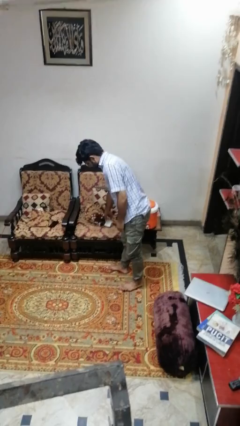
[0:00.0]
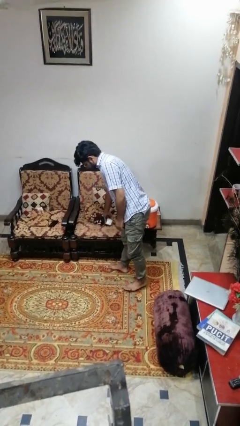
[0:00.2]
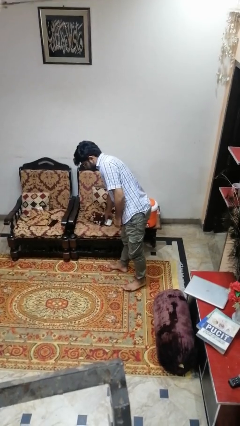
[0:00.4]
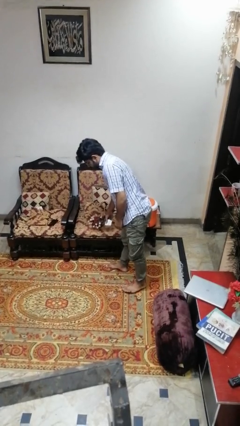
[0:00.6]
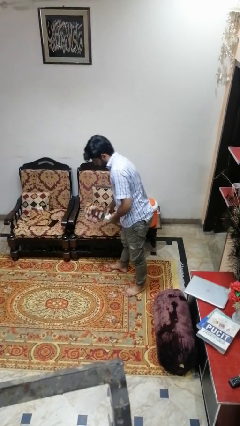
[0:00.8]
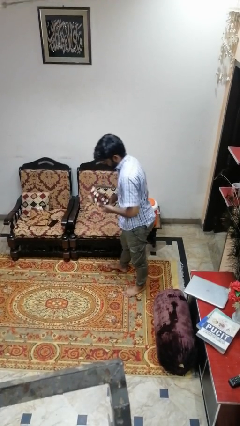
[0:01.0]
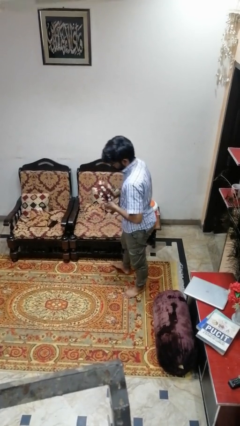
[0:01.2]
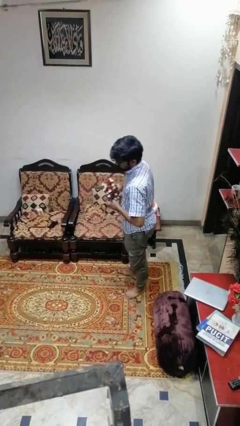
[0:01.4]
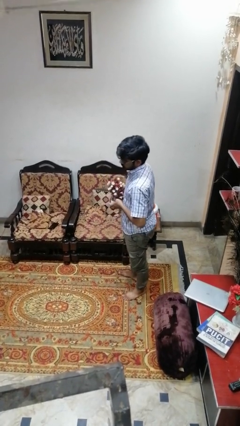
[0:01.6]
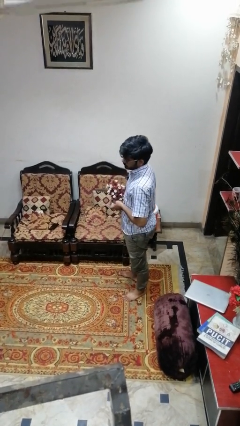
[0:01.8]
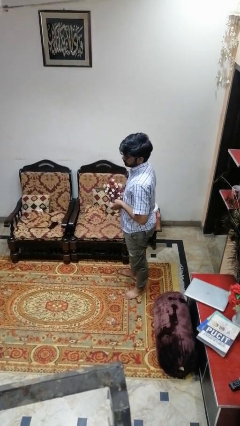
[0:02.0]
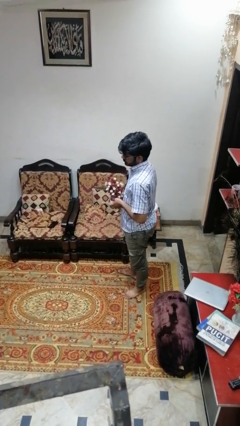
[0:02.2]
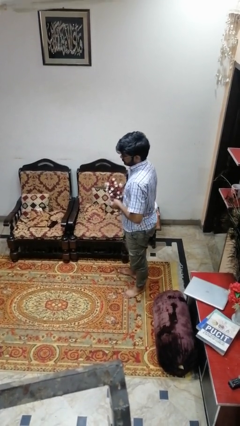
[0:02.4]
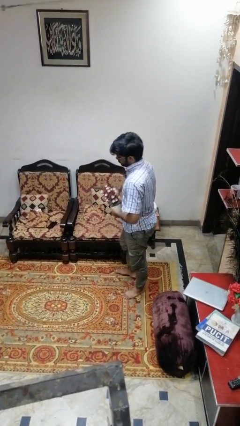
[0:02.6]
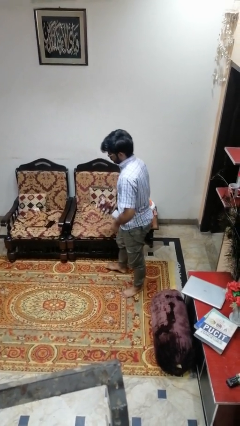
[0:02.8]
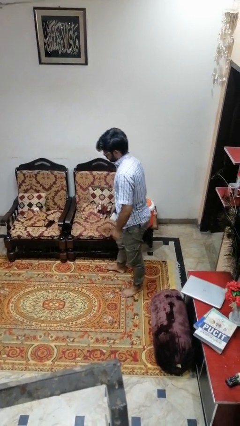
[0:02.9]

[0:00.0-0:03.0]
person picks up object from couch

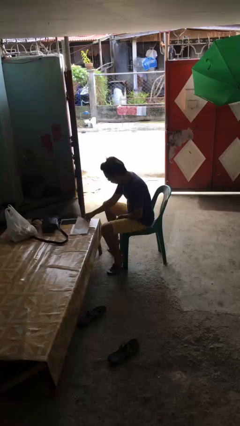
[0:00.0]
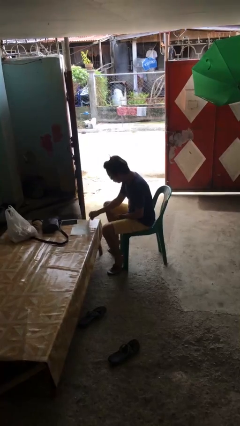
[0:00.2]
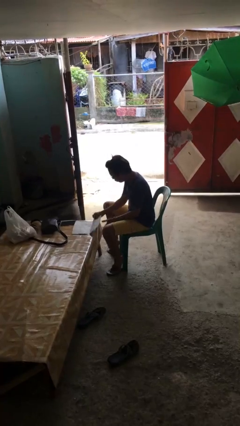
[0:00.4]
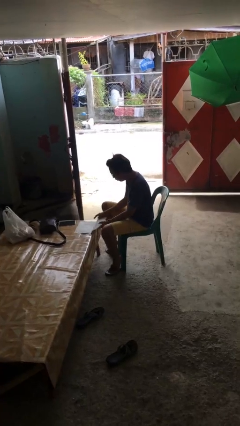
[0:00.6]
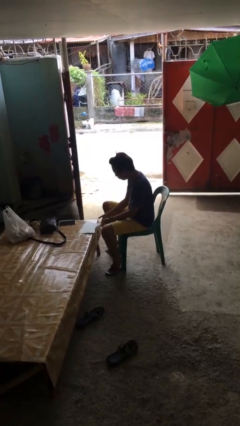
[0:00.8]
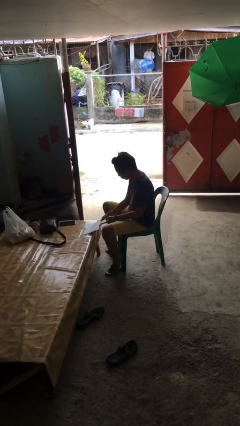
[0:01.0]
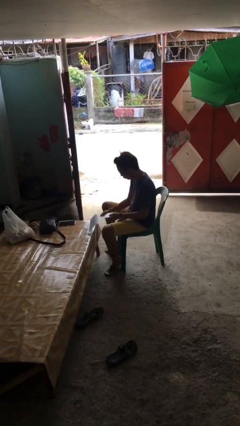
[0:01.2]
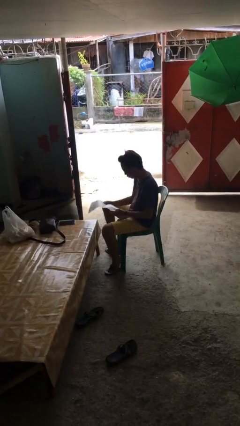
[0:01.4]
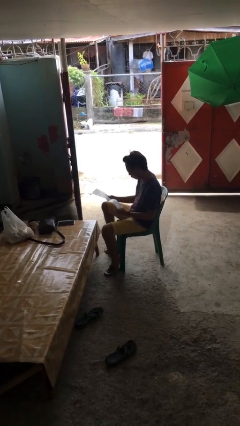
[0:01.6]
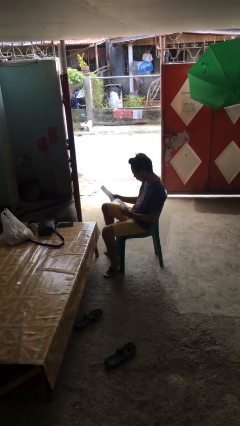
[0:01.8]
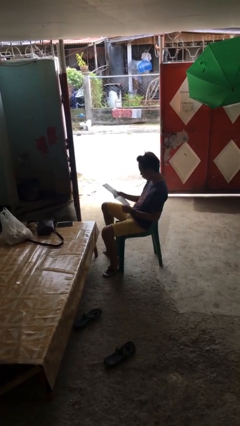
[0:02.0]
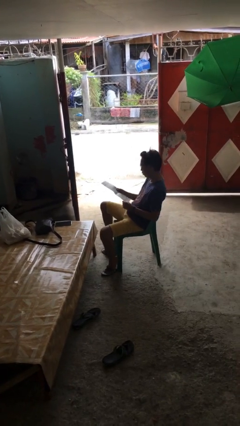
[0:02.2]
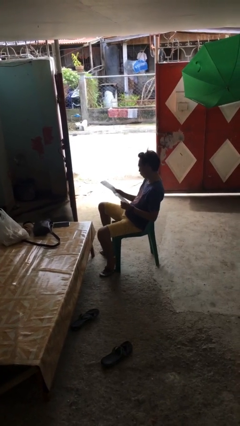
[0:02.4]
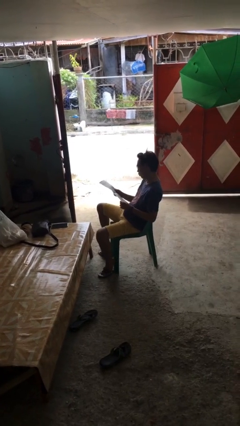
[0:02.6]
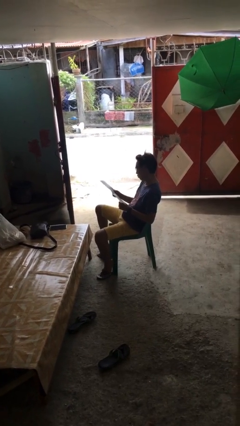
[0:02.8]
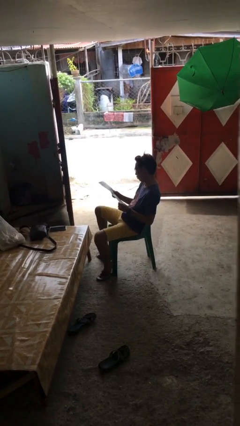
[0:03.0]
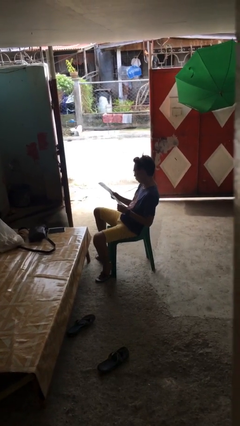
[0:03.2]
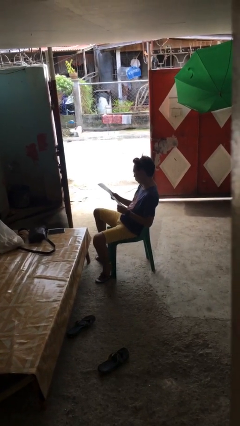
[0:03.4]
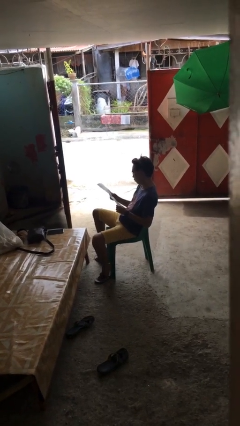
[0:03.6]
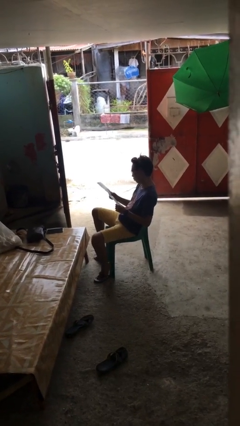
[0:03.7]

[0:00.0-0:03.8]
person picks up object from table

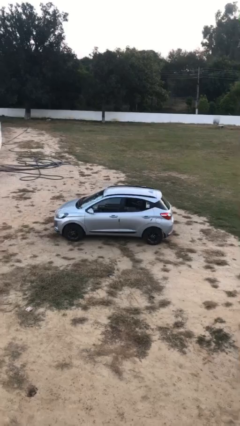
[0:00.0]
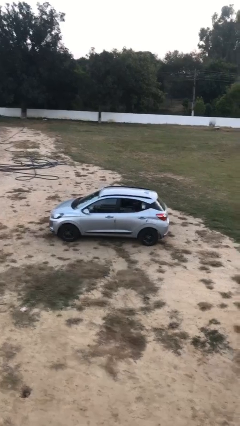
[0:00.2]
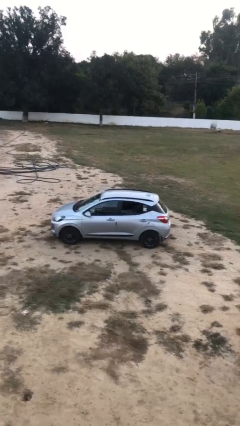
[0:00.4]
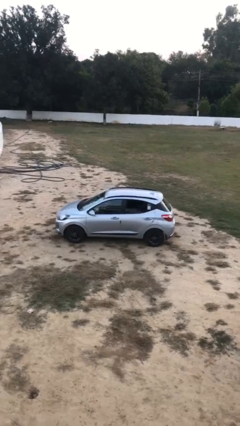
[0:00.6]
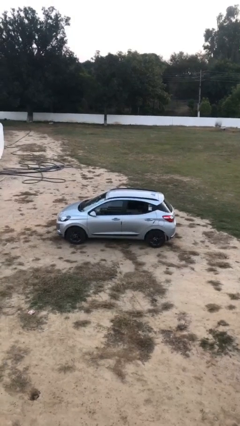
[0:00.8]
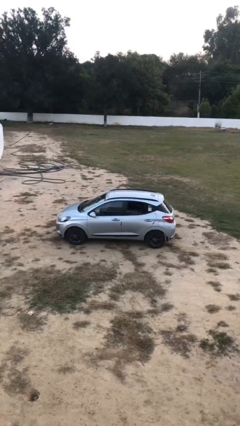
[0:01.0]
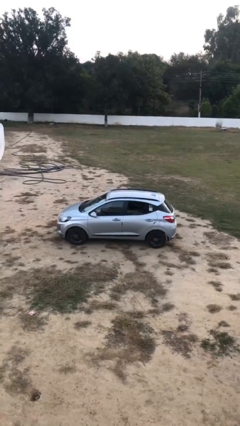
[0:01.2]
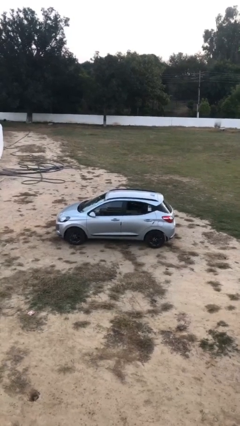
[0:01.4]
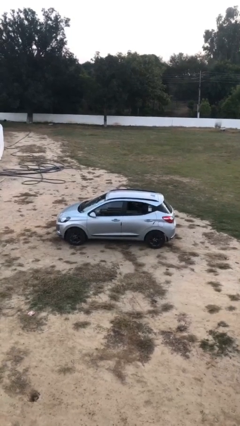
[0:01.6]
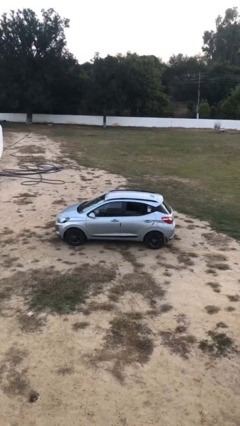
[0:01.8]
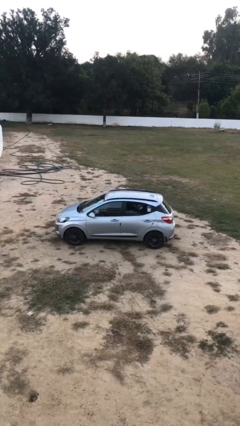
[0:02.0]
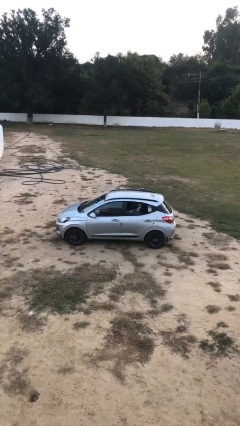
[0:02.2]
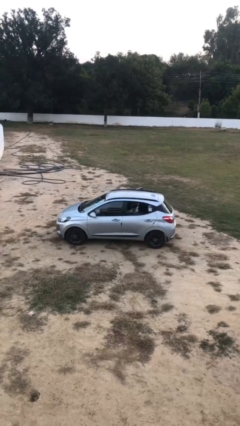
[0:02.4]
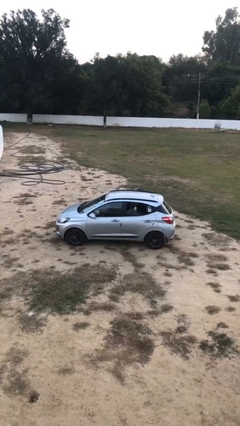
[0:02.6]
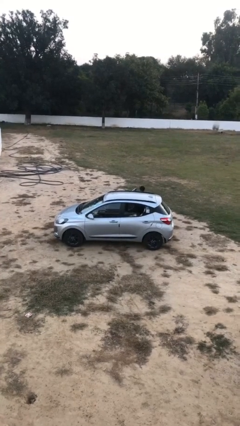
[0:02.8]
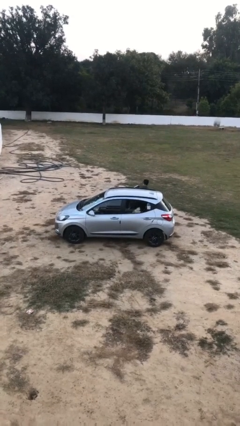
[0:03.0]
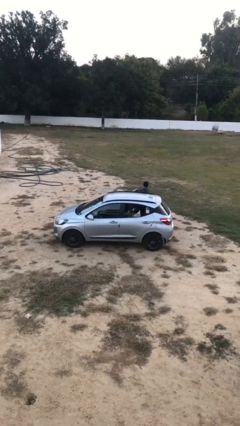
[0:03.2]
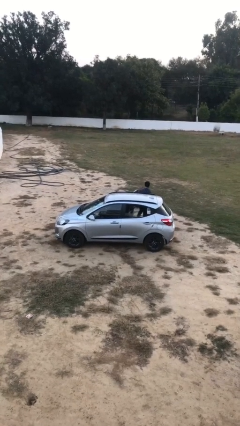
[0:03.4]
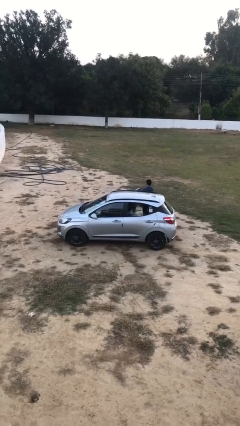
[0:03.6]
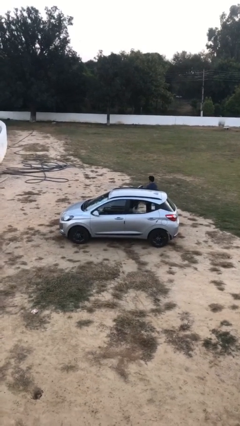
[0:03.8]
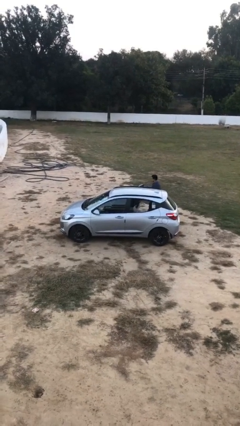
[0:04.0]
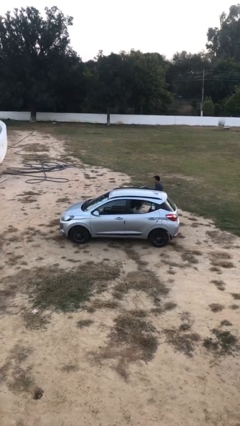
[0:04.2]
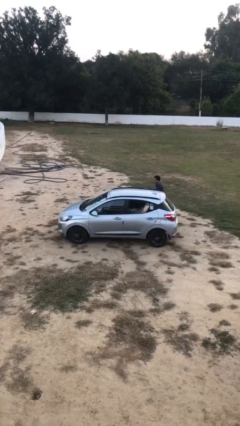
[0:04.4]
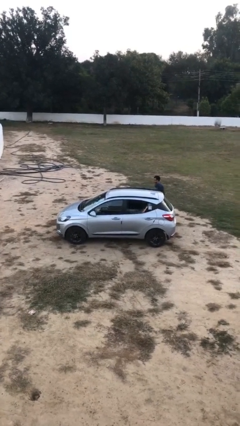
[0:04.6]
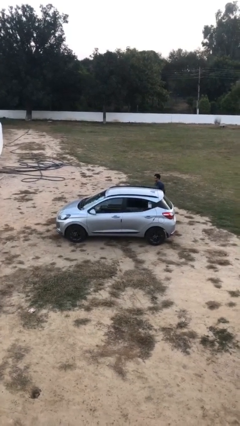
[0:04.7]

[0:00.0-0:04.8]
car drops off person

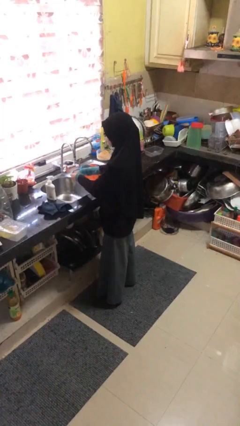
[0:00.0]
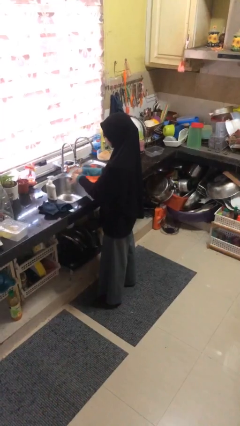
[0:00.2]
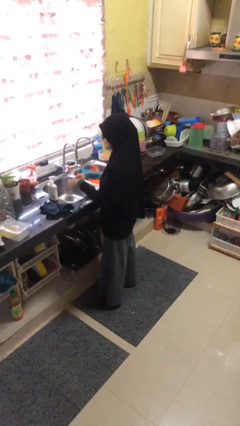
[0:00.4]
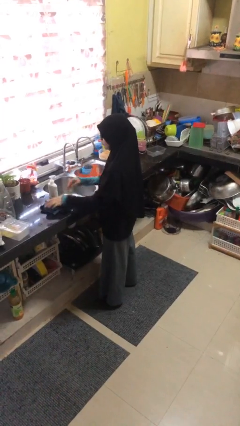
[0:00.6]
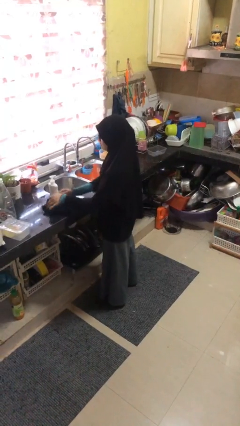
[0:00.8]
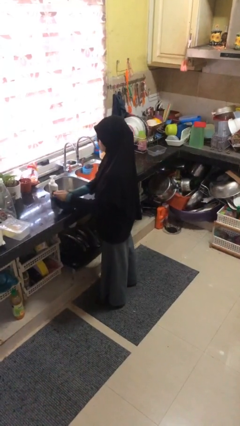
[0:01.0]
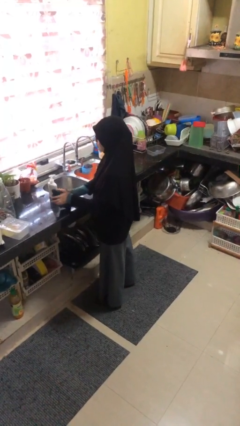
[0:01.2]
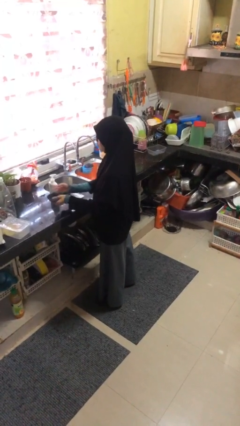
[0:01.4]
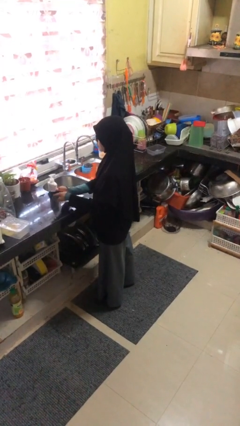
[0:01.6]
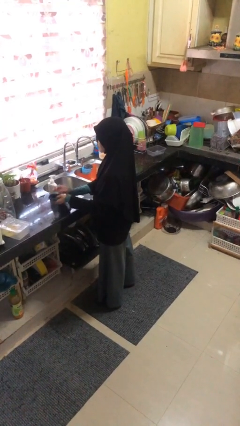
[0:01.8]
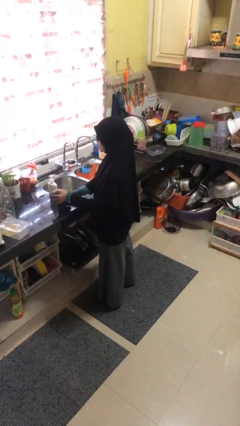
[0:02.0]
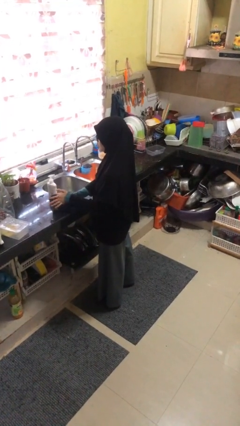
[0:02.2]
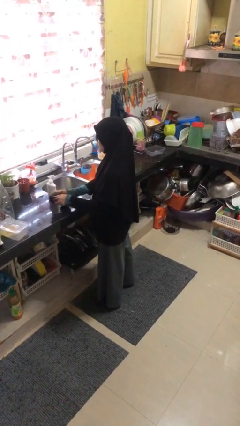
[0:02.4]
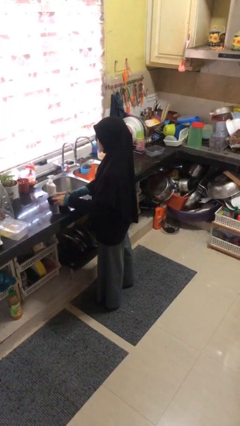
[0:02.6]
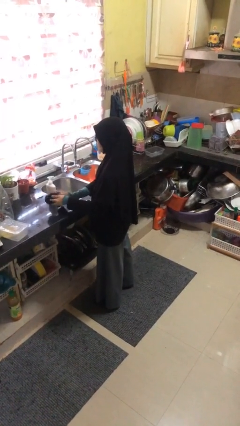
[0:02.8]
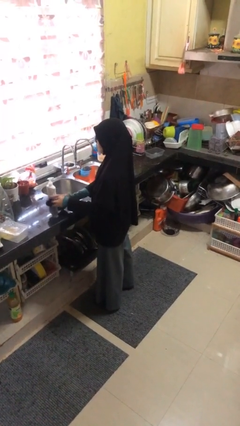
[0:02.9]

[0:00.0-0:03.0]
person dries hands with towel

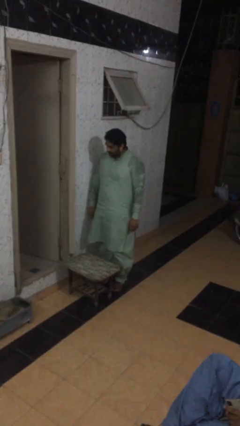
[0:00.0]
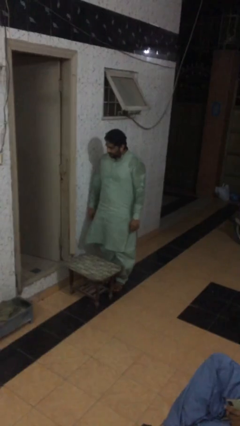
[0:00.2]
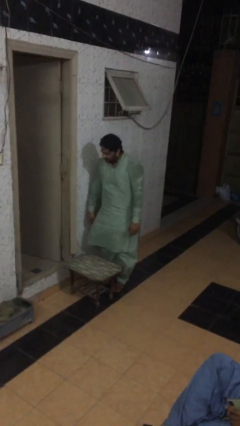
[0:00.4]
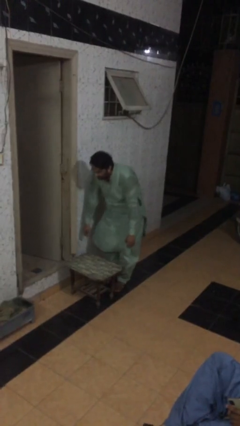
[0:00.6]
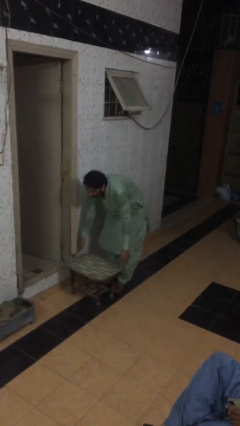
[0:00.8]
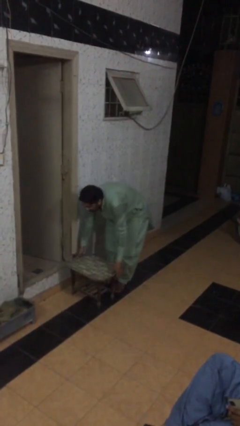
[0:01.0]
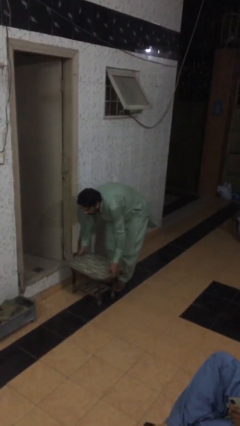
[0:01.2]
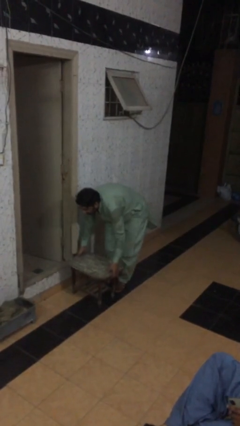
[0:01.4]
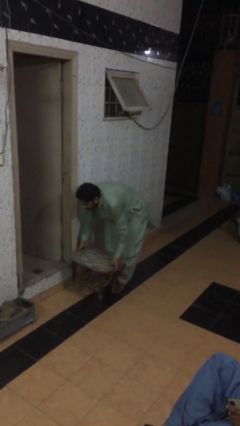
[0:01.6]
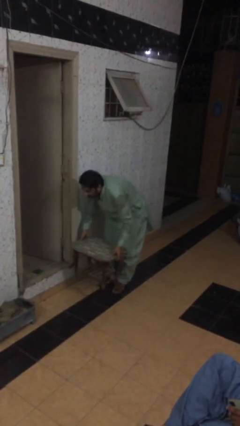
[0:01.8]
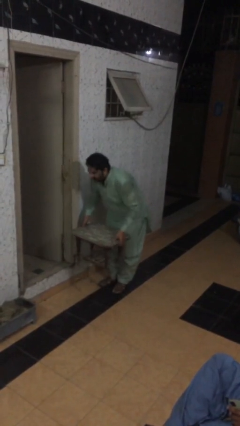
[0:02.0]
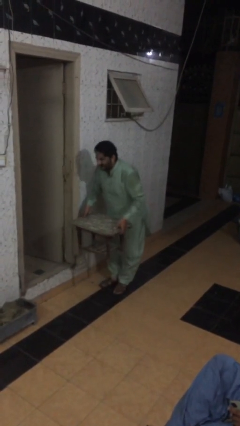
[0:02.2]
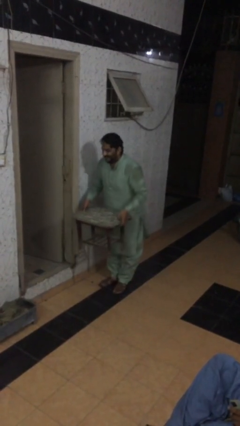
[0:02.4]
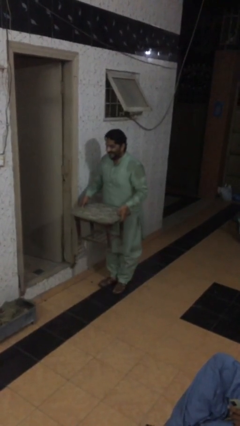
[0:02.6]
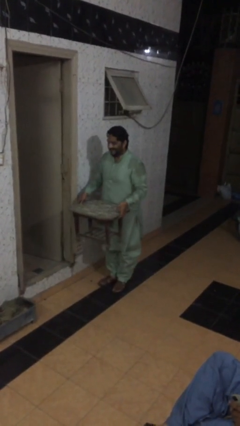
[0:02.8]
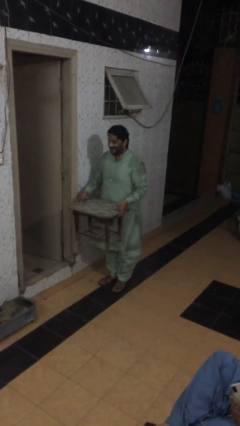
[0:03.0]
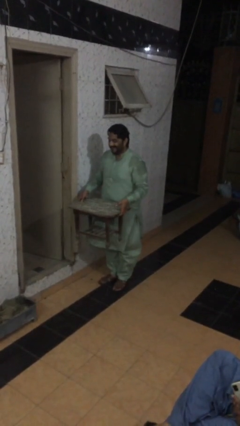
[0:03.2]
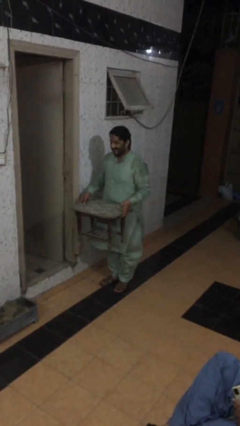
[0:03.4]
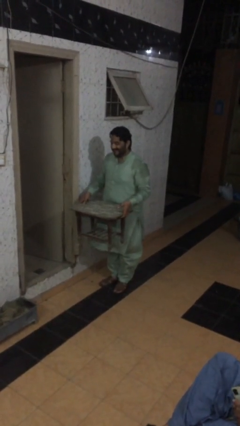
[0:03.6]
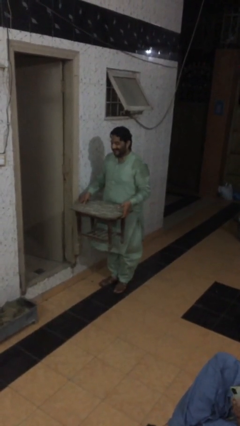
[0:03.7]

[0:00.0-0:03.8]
person picks up object from floor
